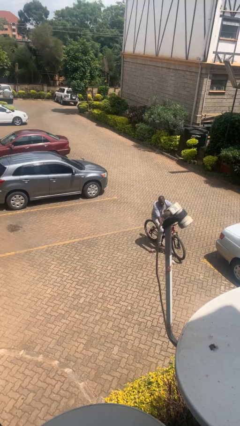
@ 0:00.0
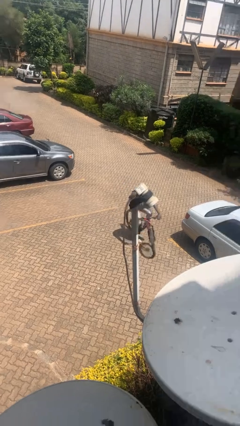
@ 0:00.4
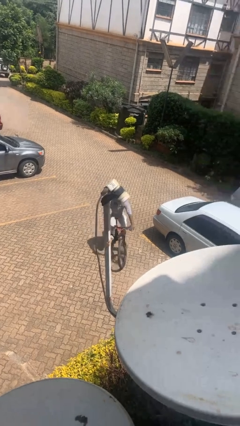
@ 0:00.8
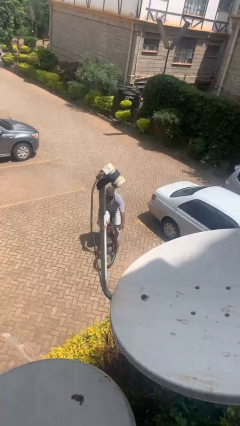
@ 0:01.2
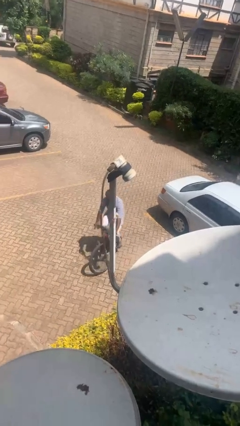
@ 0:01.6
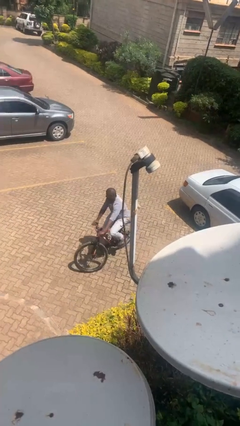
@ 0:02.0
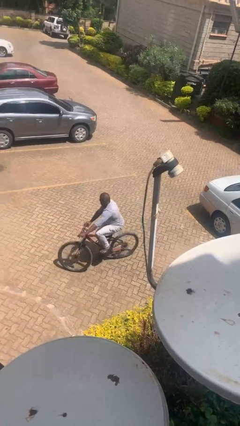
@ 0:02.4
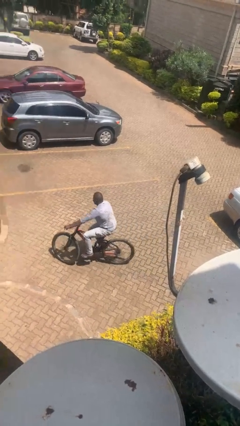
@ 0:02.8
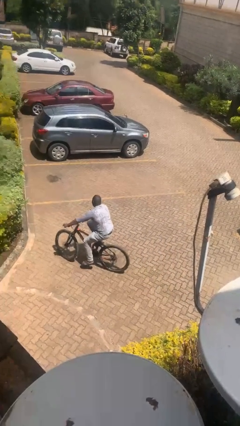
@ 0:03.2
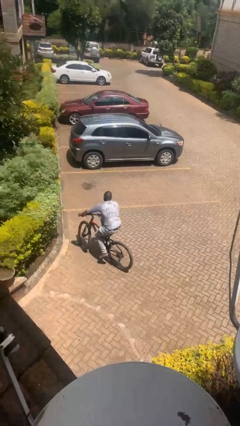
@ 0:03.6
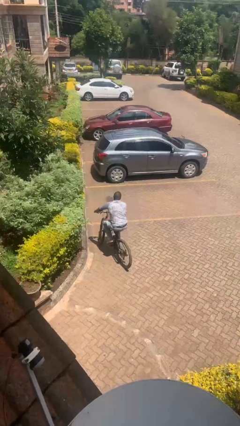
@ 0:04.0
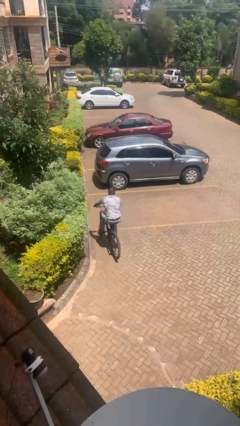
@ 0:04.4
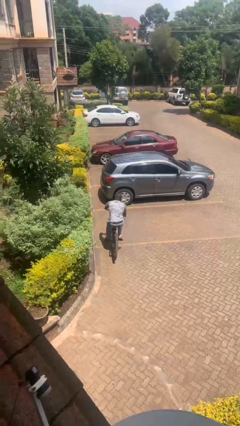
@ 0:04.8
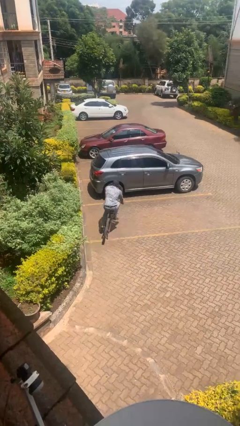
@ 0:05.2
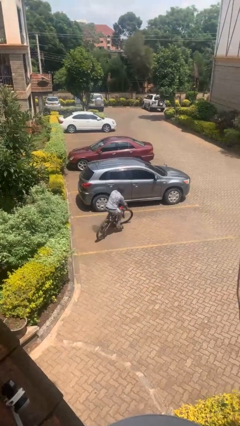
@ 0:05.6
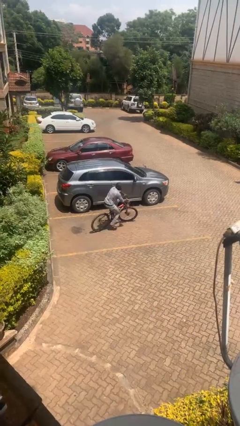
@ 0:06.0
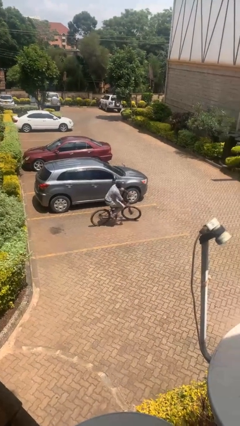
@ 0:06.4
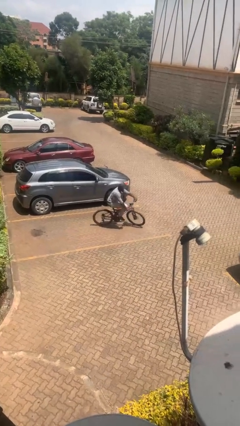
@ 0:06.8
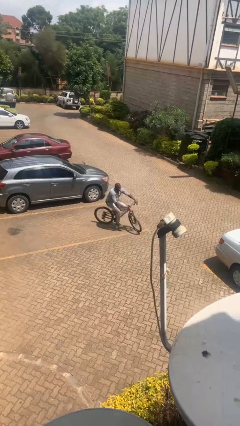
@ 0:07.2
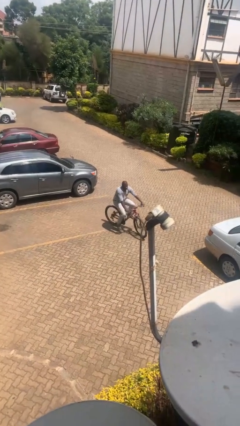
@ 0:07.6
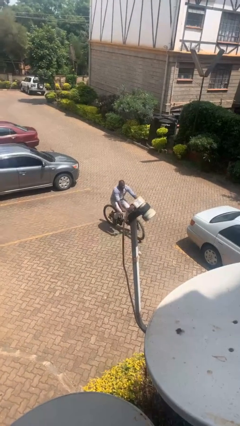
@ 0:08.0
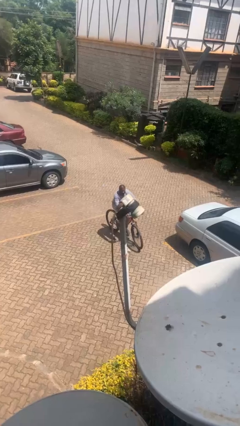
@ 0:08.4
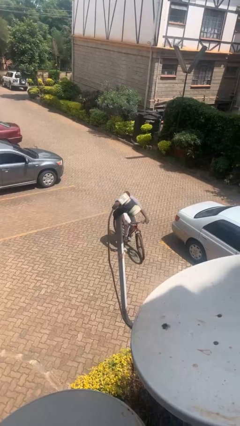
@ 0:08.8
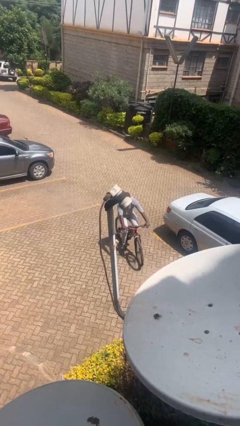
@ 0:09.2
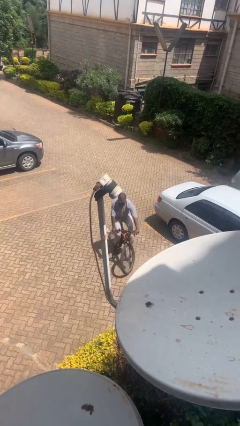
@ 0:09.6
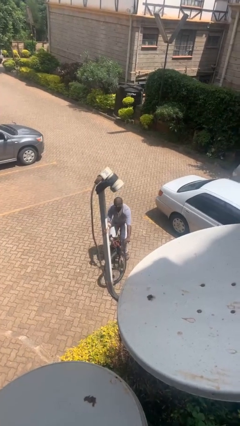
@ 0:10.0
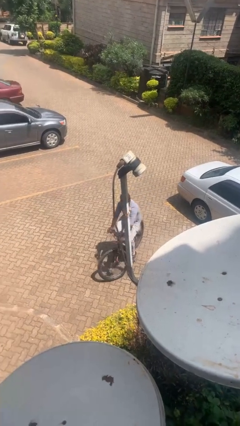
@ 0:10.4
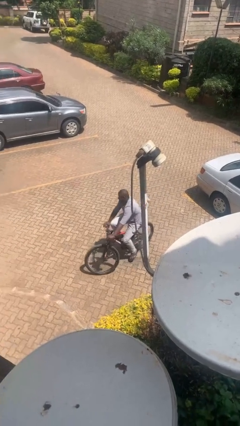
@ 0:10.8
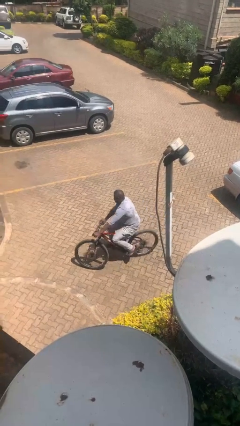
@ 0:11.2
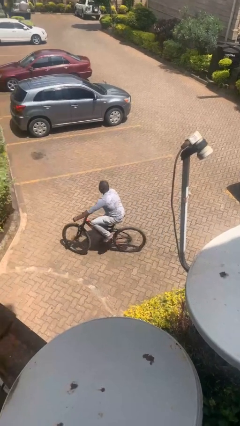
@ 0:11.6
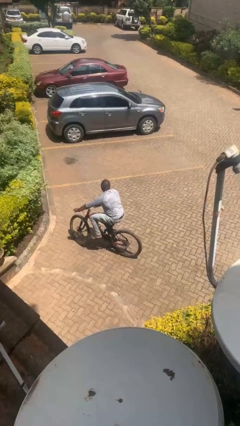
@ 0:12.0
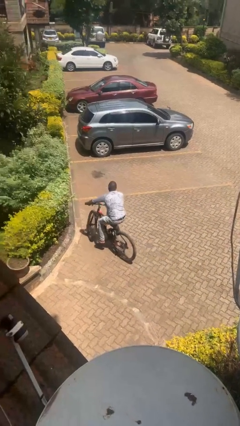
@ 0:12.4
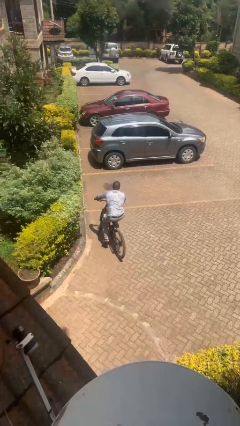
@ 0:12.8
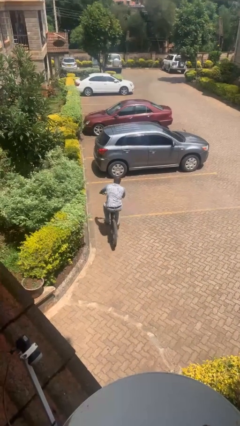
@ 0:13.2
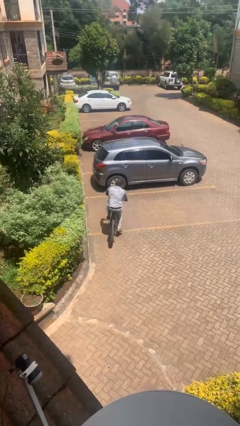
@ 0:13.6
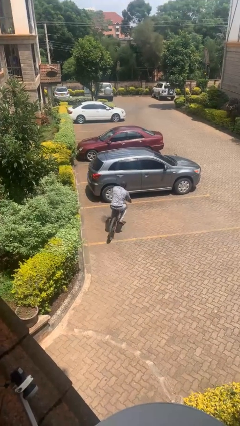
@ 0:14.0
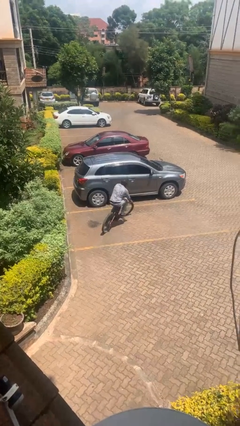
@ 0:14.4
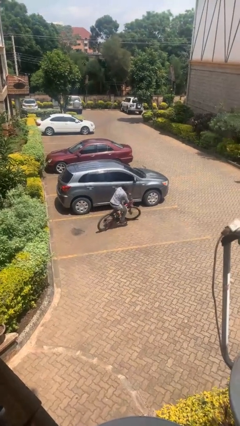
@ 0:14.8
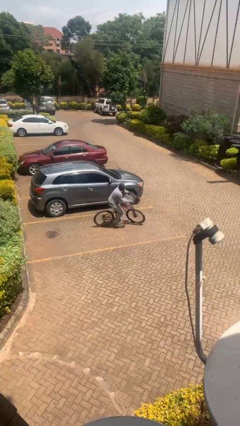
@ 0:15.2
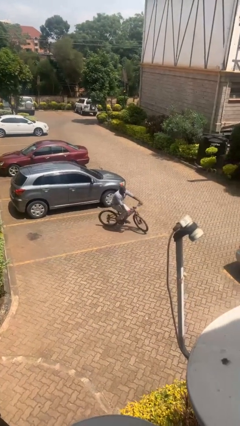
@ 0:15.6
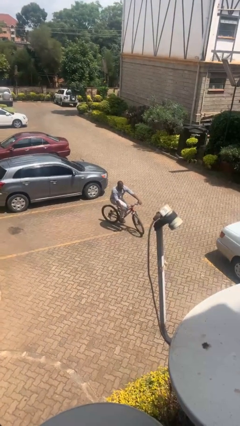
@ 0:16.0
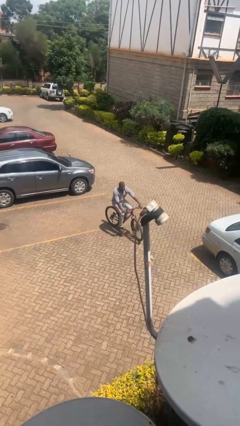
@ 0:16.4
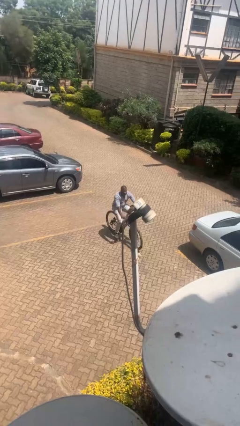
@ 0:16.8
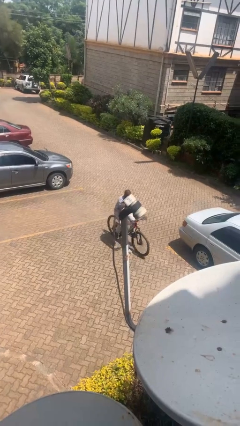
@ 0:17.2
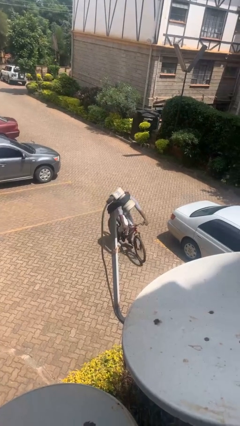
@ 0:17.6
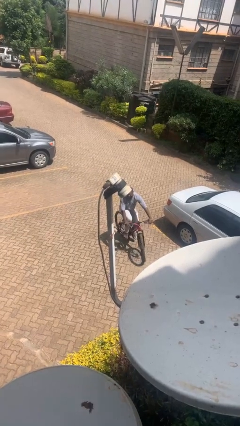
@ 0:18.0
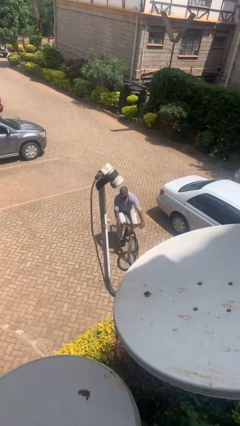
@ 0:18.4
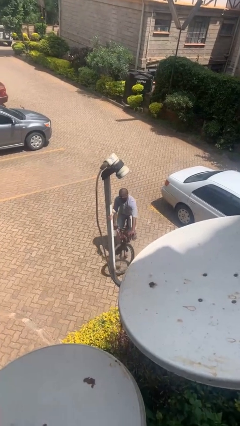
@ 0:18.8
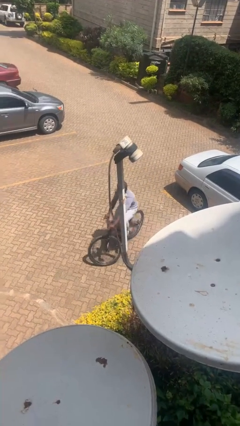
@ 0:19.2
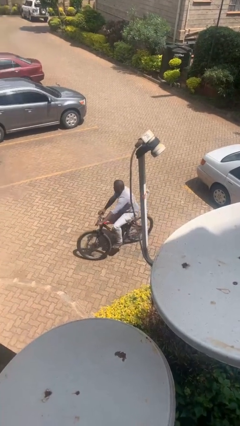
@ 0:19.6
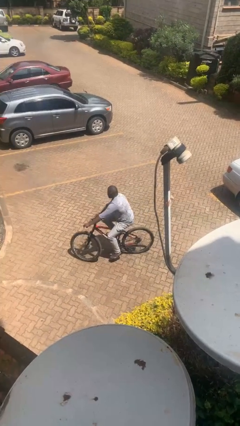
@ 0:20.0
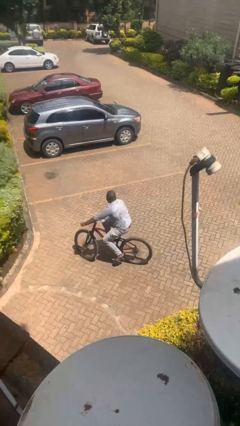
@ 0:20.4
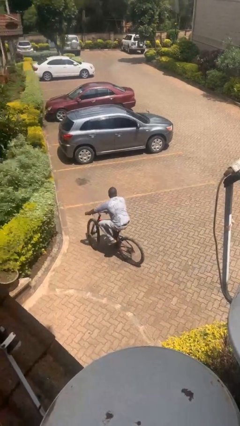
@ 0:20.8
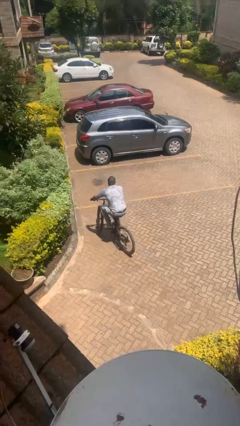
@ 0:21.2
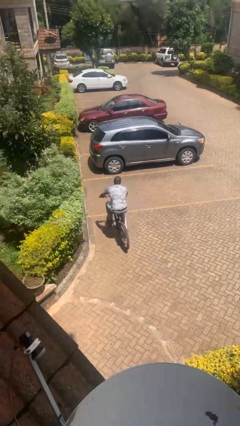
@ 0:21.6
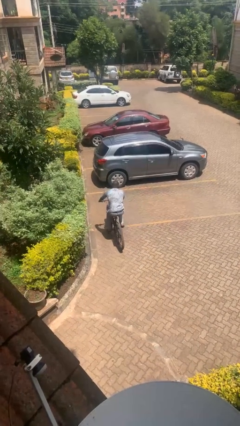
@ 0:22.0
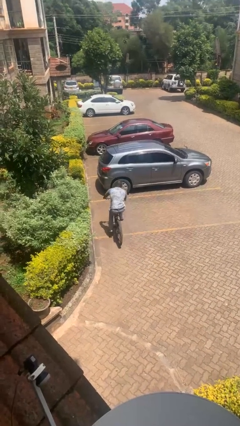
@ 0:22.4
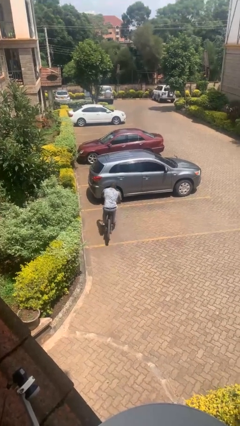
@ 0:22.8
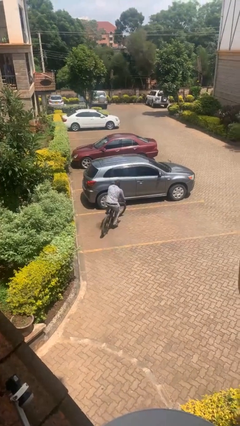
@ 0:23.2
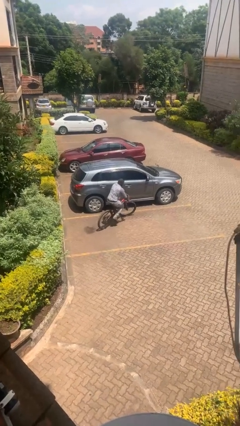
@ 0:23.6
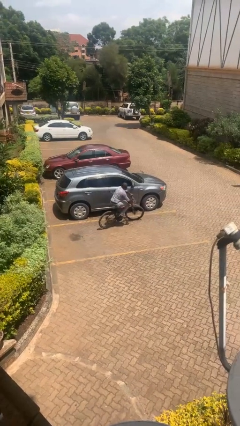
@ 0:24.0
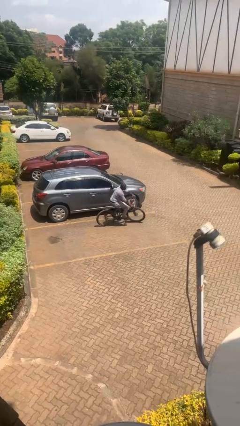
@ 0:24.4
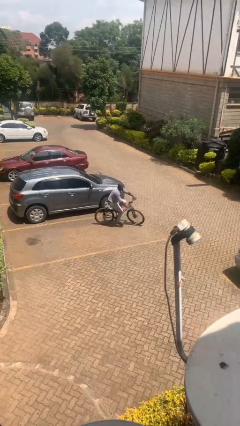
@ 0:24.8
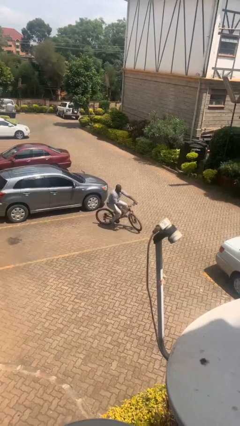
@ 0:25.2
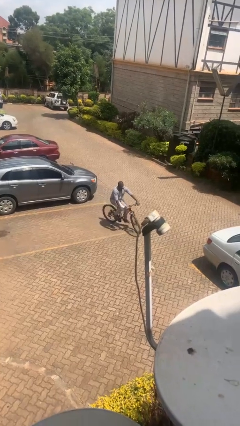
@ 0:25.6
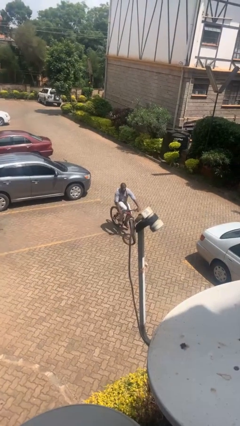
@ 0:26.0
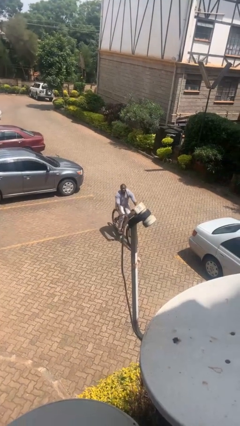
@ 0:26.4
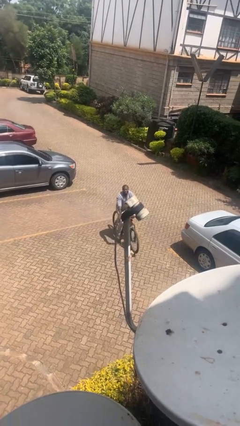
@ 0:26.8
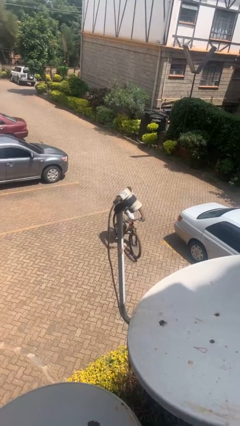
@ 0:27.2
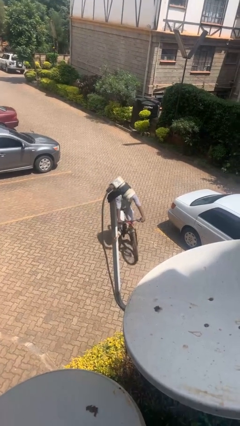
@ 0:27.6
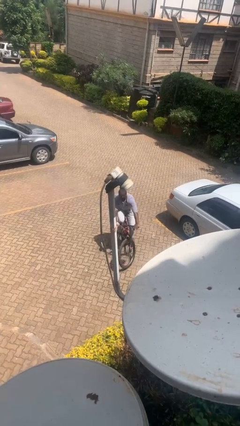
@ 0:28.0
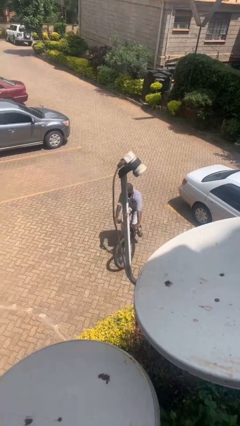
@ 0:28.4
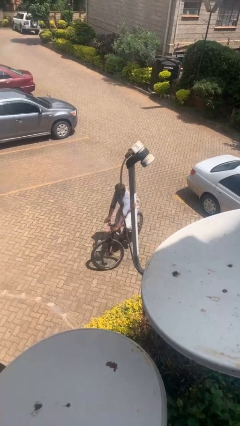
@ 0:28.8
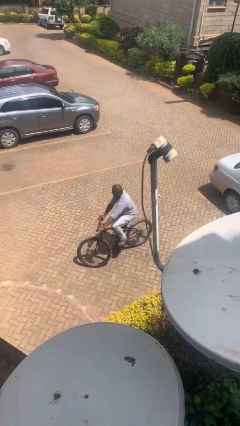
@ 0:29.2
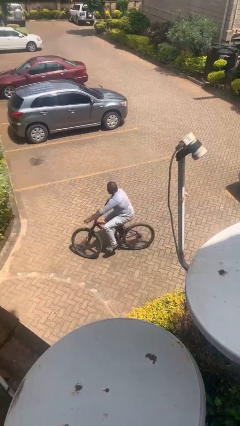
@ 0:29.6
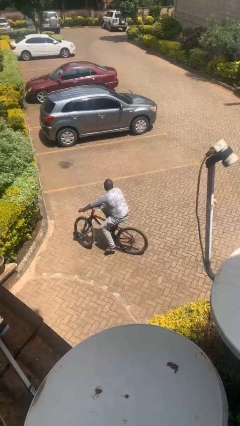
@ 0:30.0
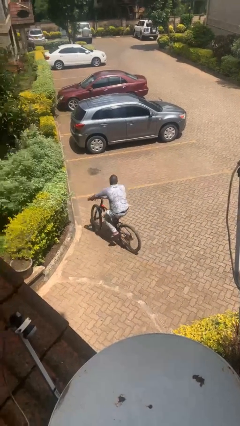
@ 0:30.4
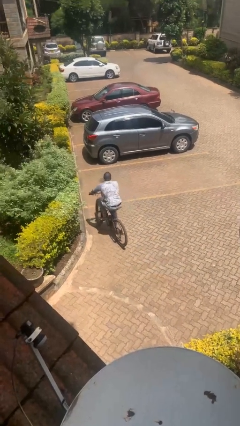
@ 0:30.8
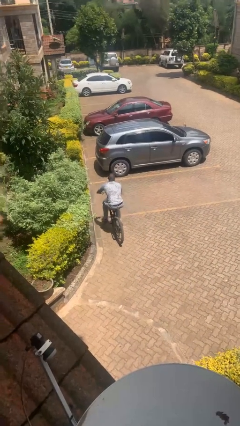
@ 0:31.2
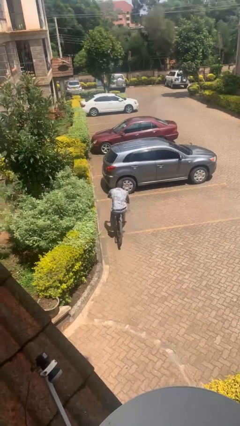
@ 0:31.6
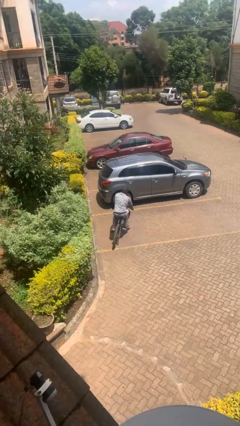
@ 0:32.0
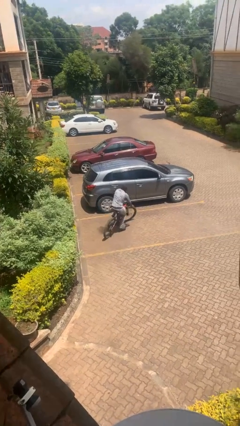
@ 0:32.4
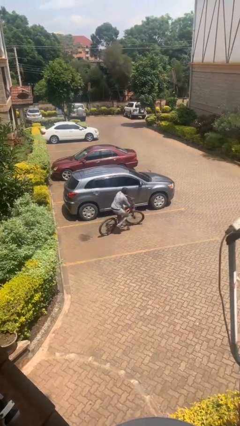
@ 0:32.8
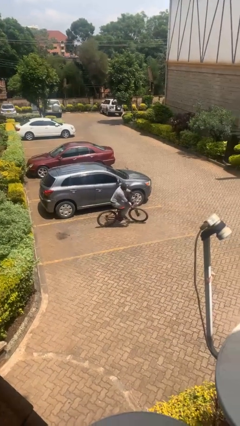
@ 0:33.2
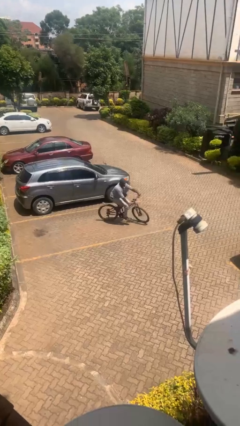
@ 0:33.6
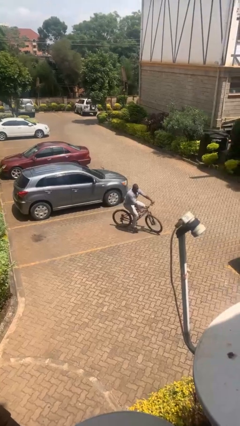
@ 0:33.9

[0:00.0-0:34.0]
person rides bicycle

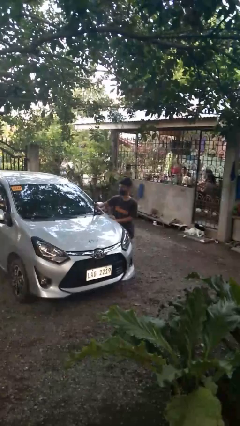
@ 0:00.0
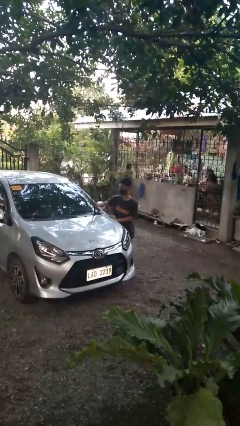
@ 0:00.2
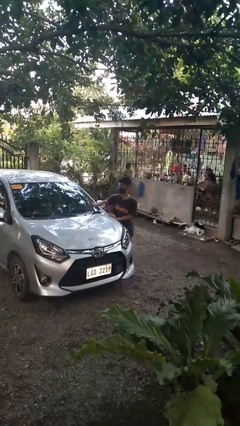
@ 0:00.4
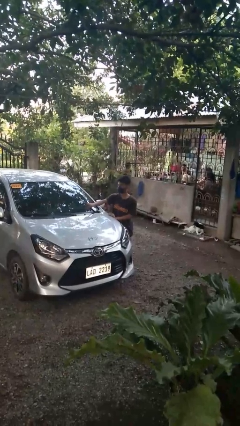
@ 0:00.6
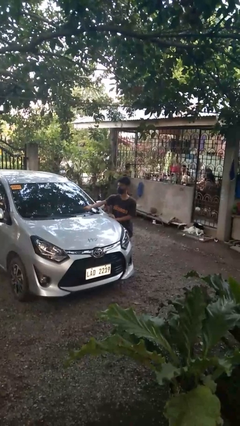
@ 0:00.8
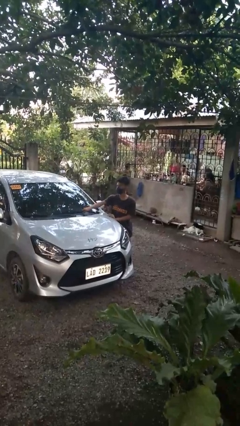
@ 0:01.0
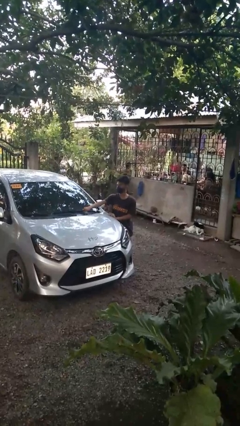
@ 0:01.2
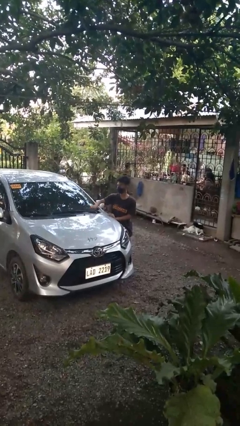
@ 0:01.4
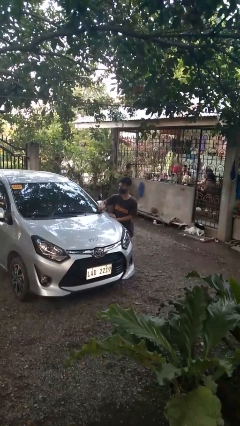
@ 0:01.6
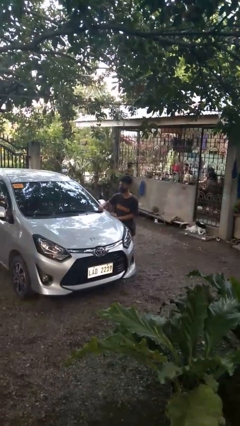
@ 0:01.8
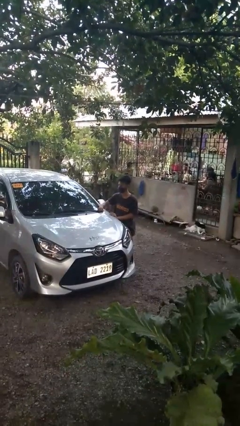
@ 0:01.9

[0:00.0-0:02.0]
person flips down car wipers
